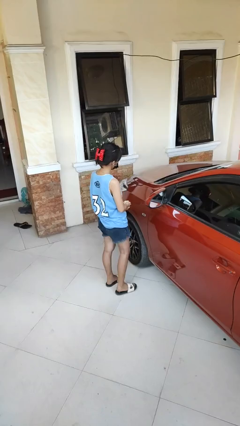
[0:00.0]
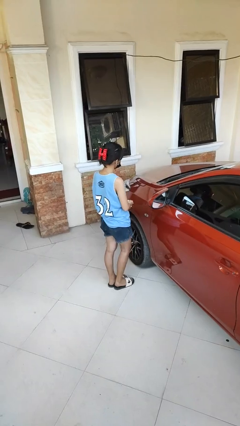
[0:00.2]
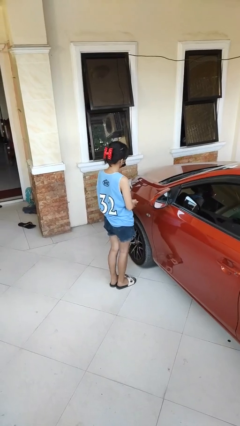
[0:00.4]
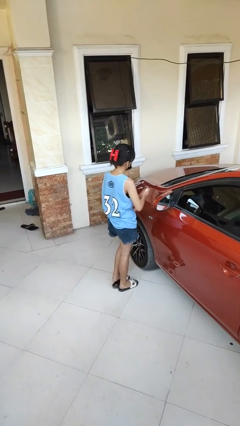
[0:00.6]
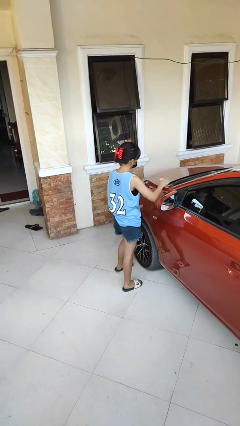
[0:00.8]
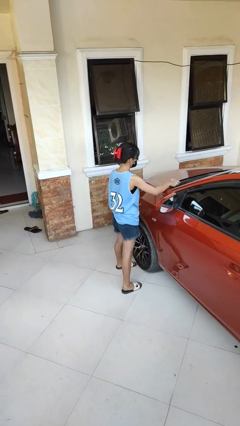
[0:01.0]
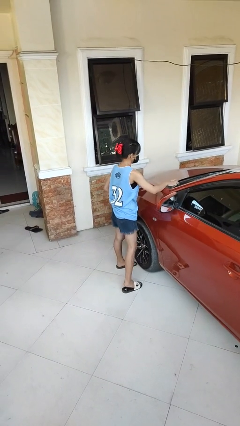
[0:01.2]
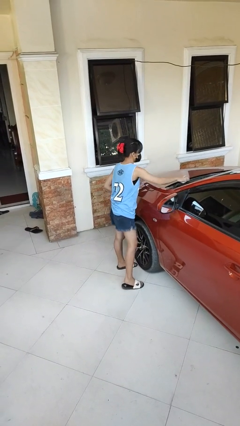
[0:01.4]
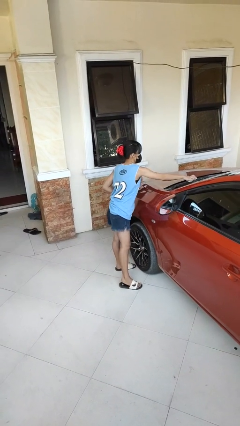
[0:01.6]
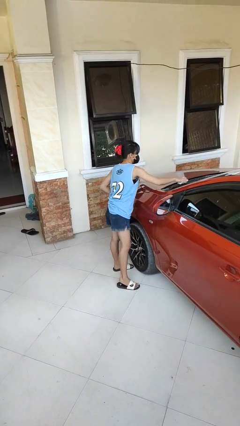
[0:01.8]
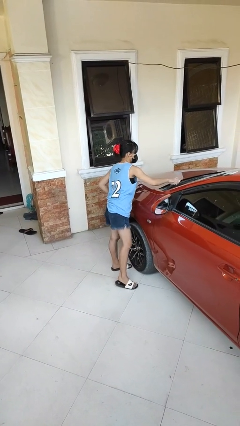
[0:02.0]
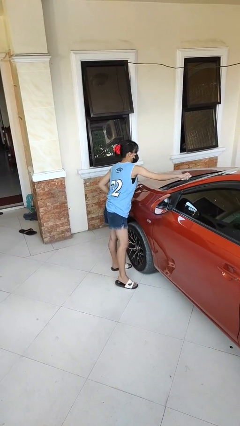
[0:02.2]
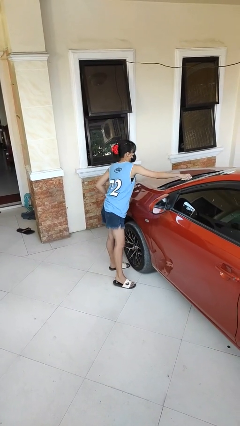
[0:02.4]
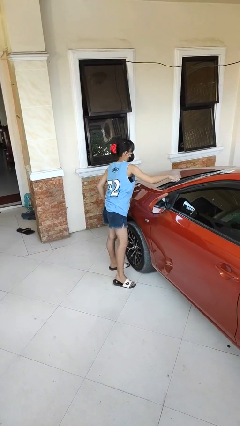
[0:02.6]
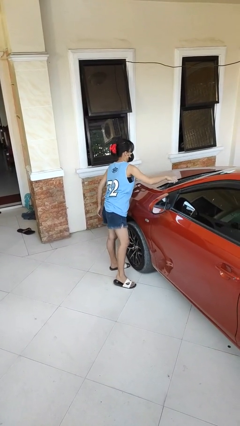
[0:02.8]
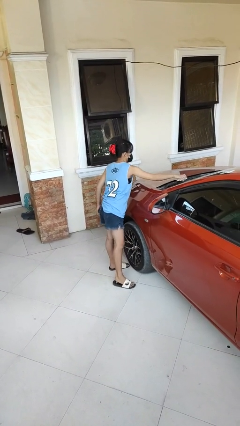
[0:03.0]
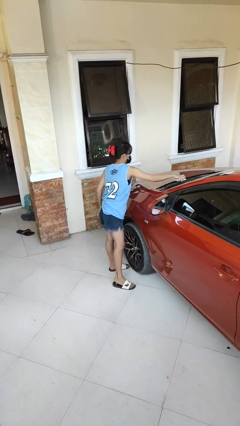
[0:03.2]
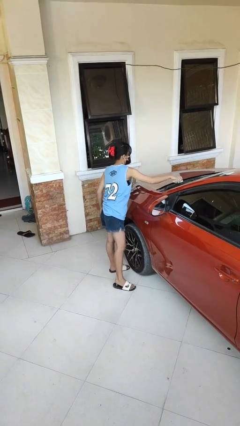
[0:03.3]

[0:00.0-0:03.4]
person polishes car with rag

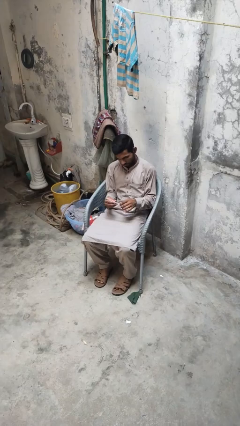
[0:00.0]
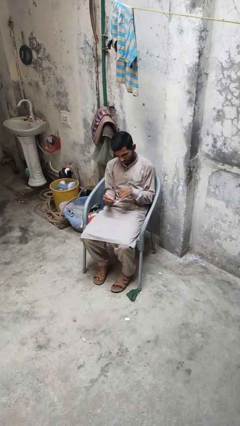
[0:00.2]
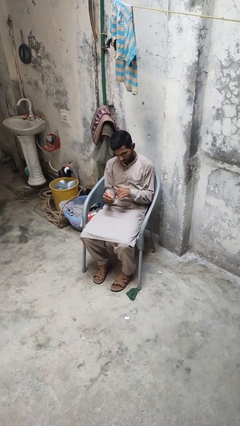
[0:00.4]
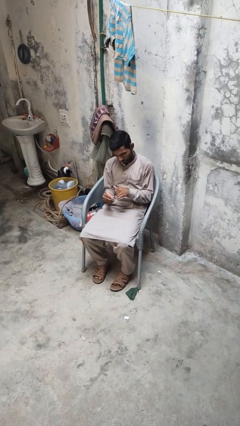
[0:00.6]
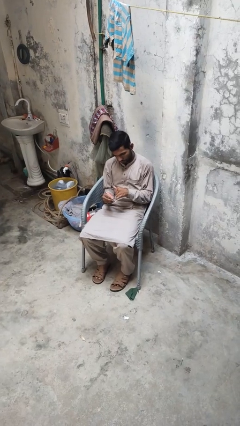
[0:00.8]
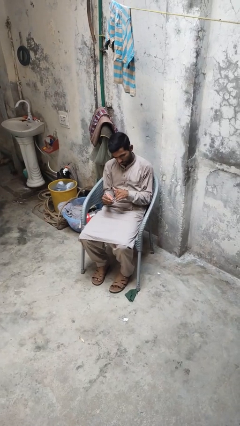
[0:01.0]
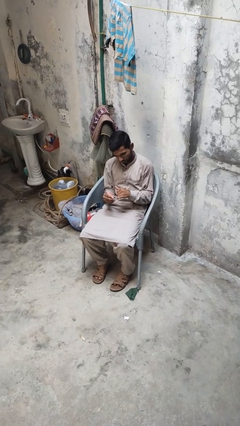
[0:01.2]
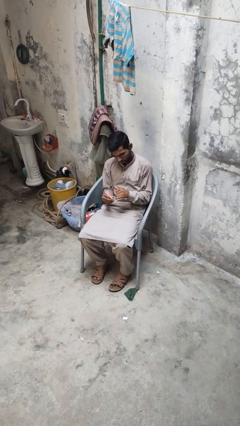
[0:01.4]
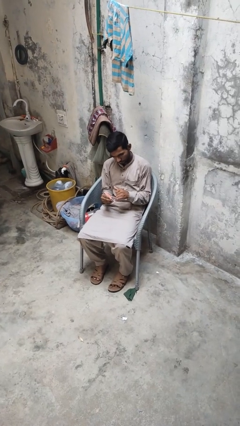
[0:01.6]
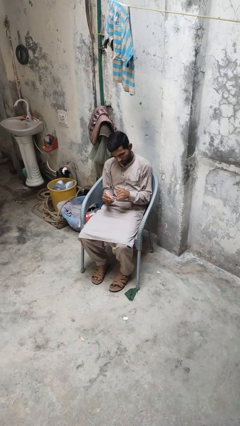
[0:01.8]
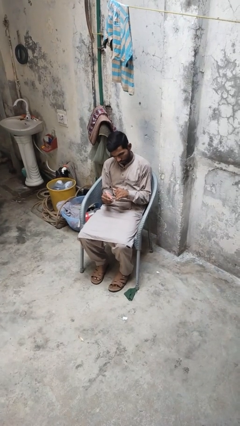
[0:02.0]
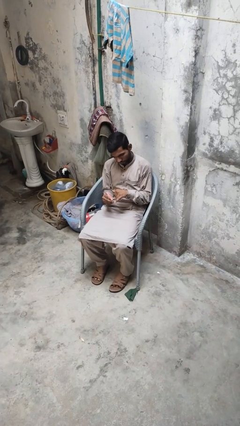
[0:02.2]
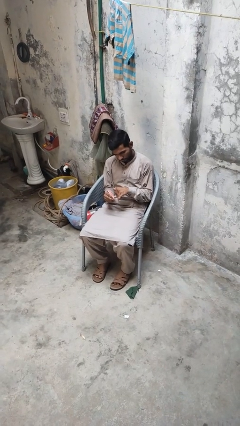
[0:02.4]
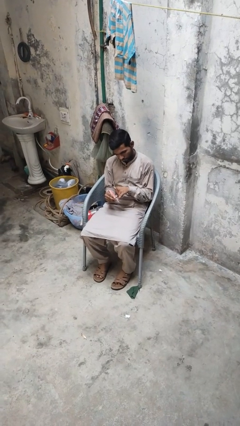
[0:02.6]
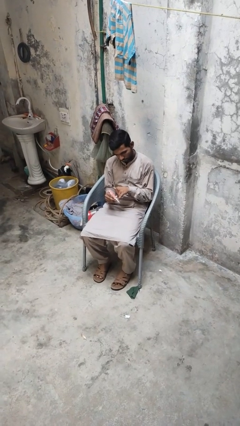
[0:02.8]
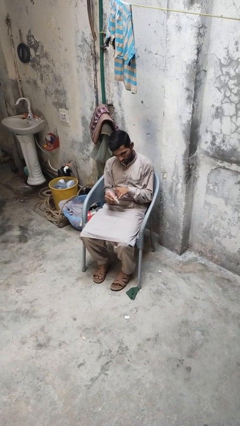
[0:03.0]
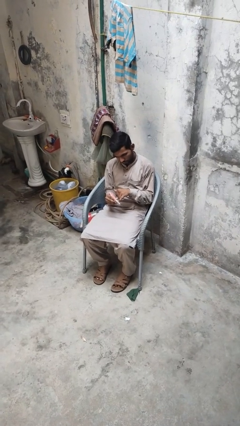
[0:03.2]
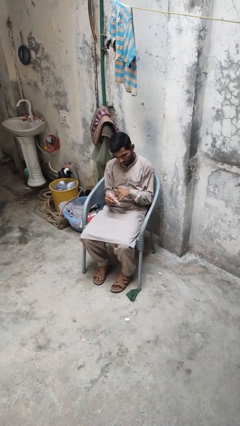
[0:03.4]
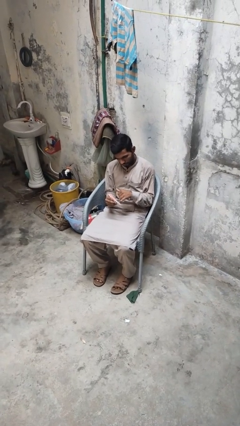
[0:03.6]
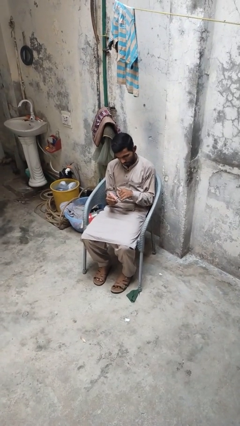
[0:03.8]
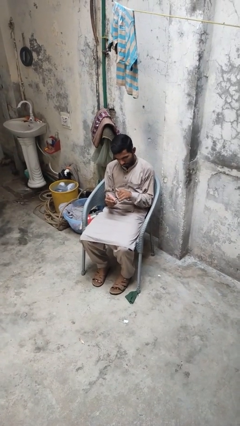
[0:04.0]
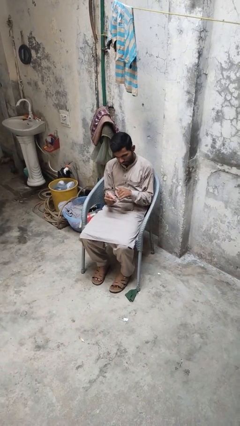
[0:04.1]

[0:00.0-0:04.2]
person files fingernails

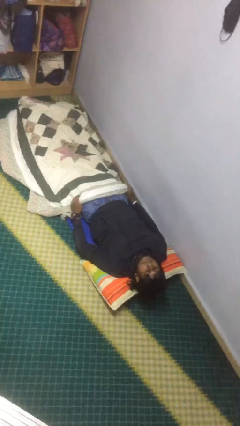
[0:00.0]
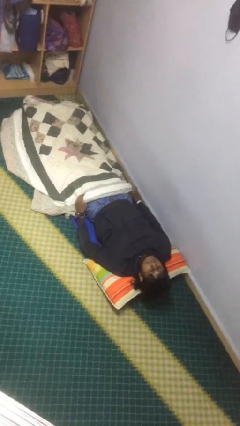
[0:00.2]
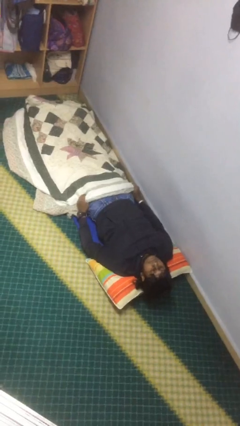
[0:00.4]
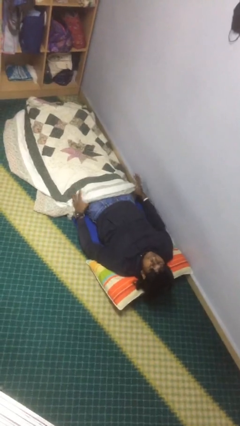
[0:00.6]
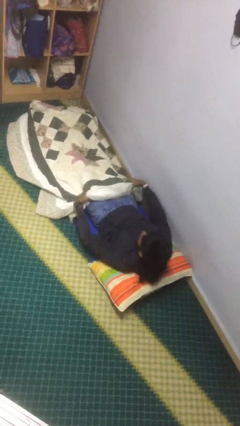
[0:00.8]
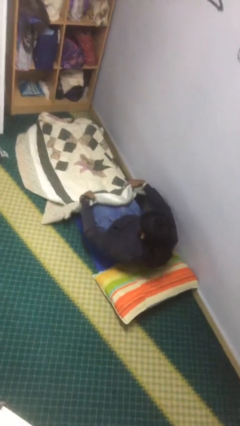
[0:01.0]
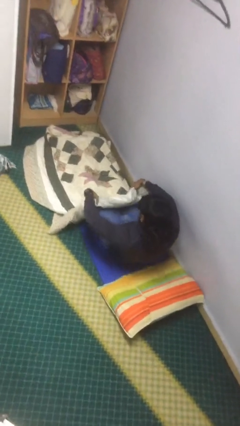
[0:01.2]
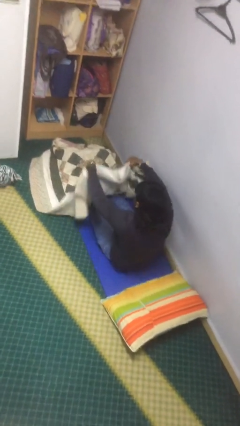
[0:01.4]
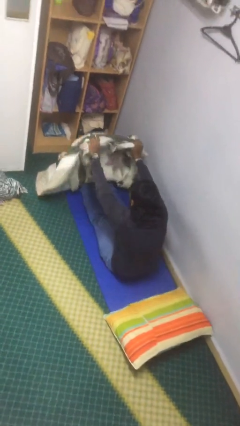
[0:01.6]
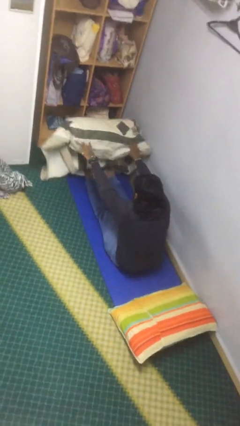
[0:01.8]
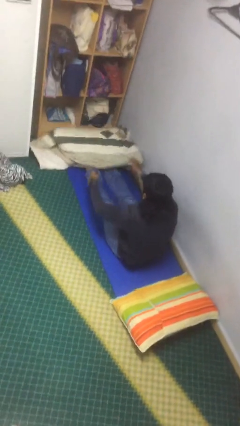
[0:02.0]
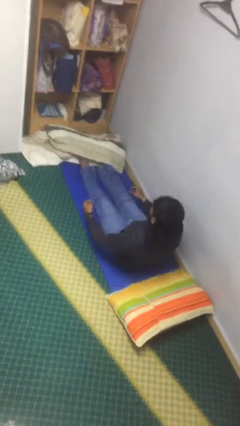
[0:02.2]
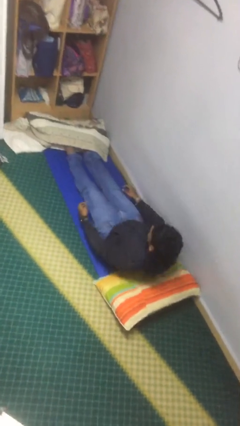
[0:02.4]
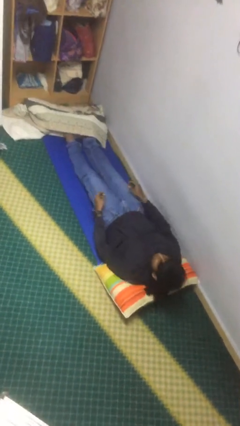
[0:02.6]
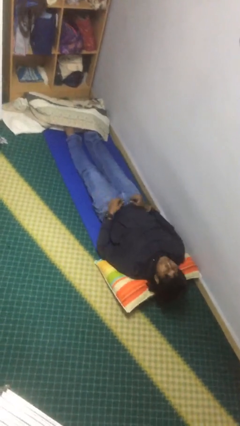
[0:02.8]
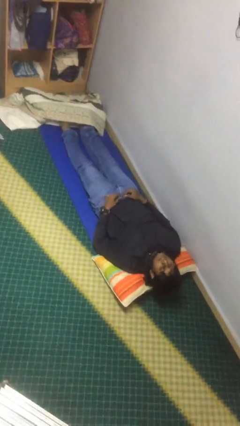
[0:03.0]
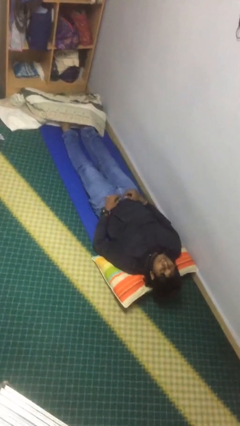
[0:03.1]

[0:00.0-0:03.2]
person uncovers with bedsheets

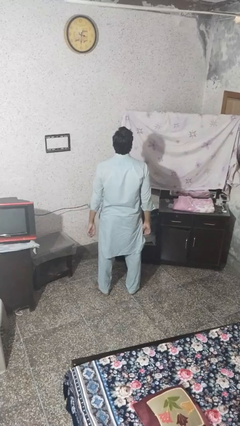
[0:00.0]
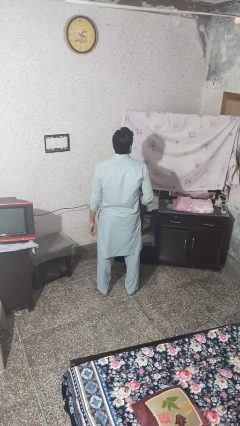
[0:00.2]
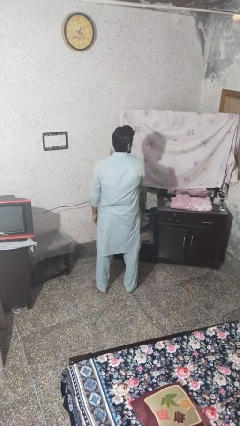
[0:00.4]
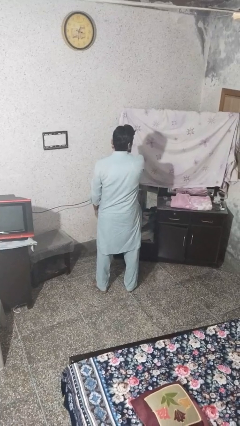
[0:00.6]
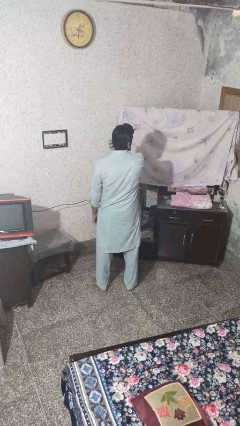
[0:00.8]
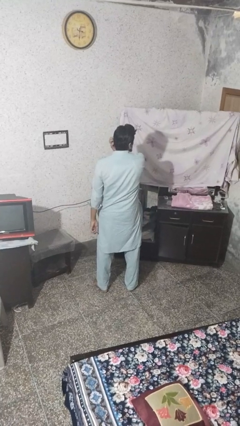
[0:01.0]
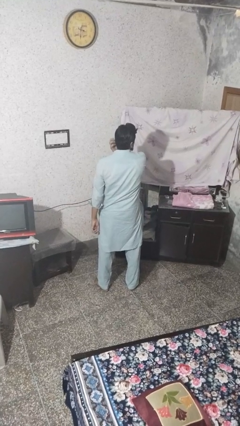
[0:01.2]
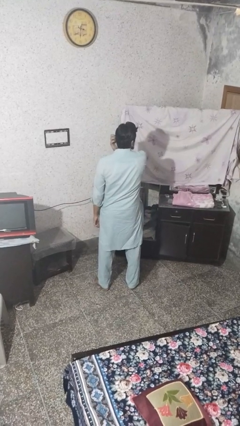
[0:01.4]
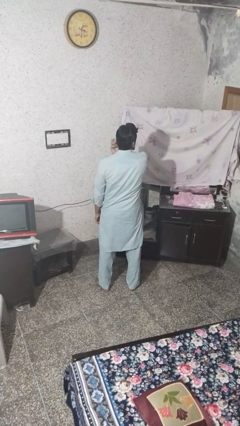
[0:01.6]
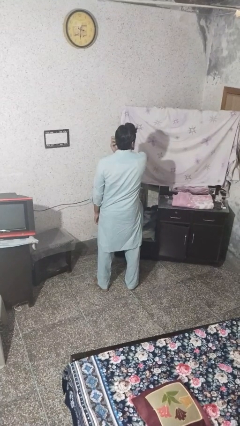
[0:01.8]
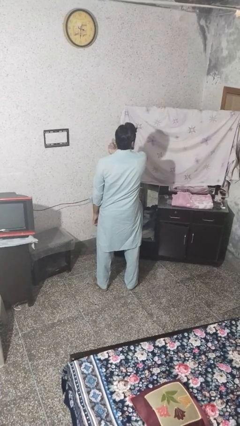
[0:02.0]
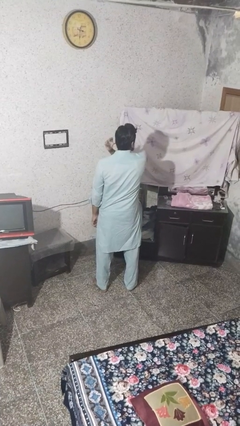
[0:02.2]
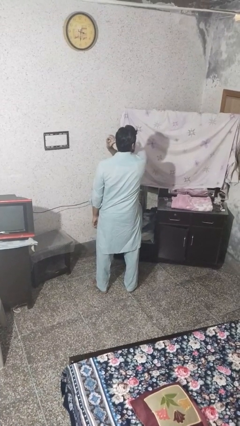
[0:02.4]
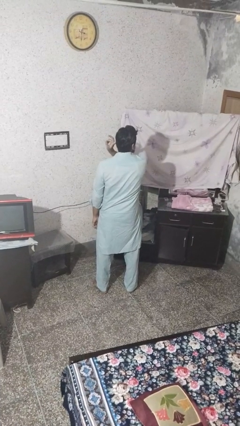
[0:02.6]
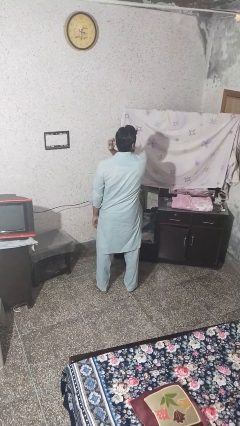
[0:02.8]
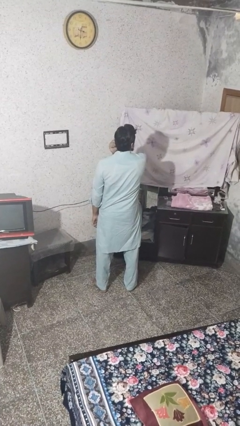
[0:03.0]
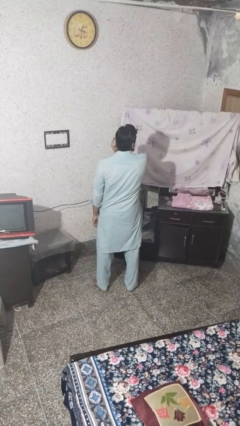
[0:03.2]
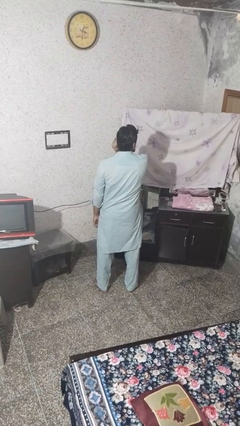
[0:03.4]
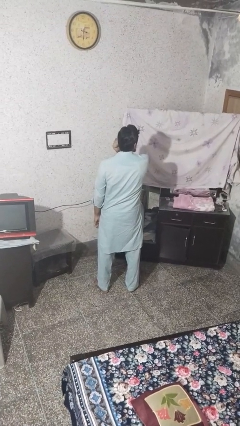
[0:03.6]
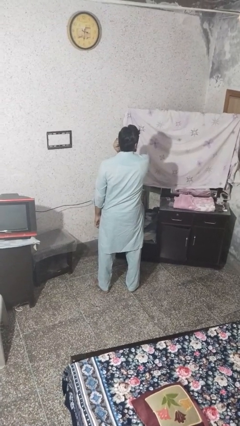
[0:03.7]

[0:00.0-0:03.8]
person puts fingers in ear

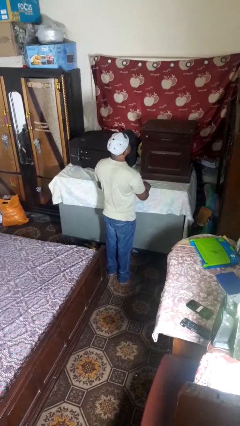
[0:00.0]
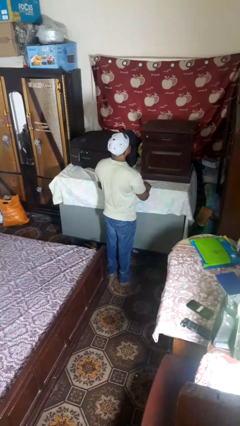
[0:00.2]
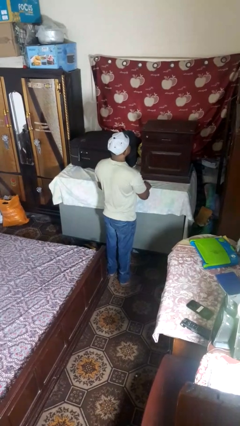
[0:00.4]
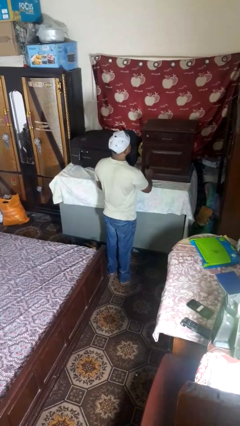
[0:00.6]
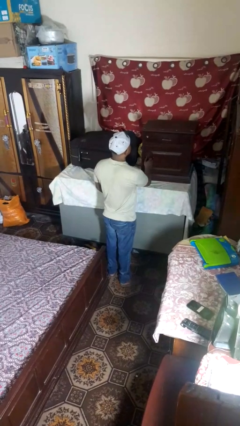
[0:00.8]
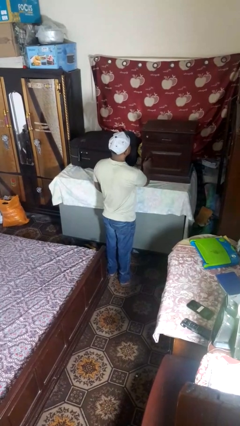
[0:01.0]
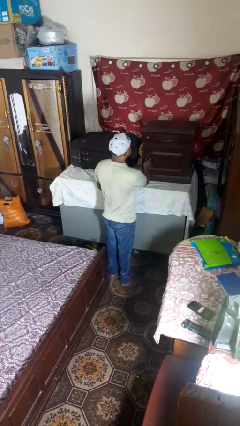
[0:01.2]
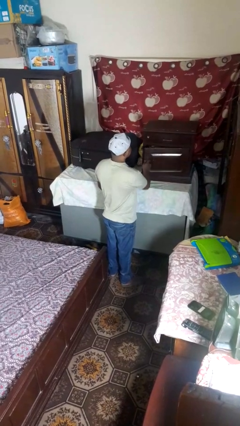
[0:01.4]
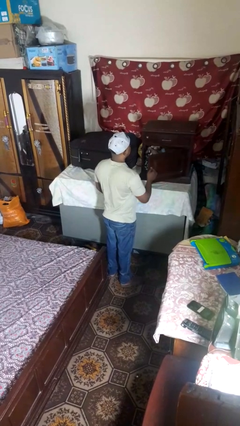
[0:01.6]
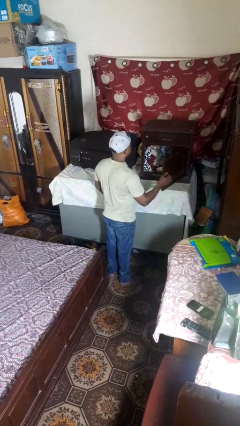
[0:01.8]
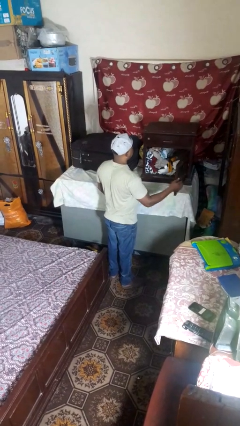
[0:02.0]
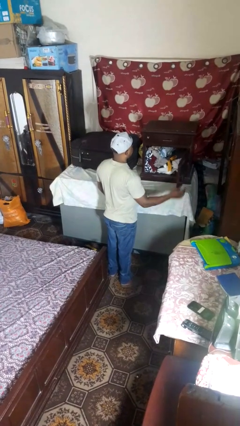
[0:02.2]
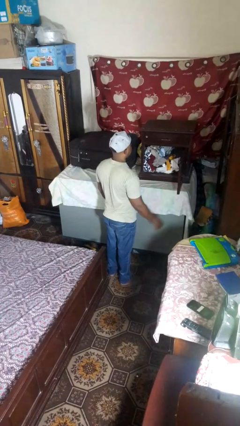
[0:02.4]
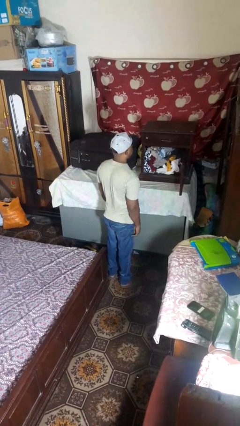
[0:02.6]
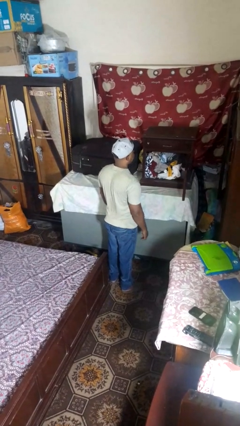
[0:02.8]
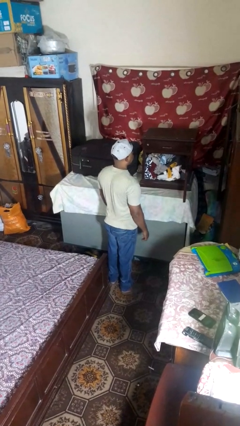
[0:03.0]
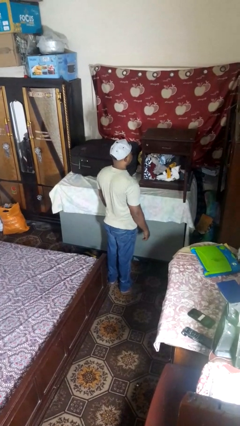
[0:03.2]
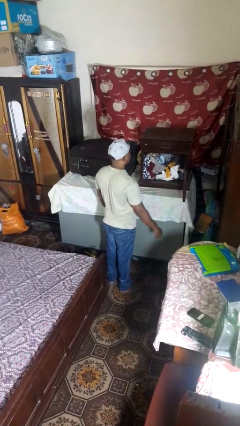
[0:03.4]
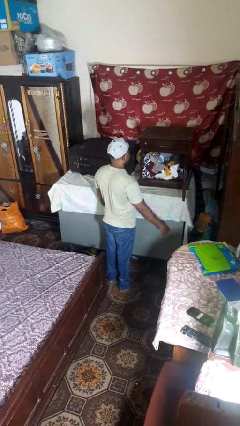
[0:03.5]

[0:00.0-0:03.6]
person opens closet door
